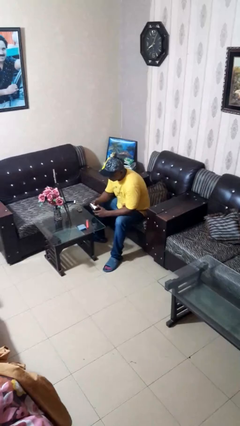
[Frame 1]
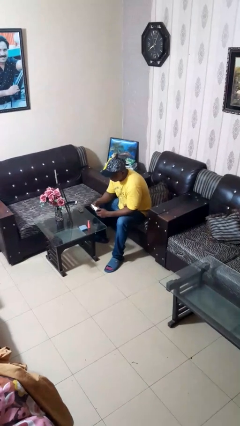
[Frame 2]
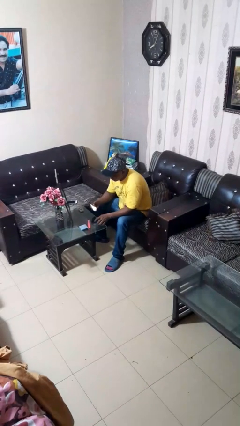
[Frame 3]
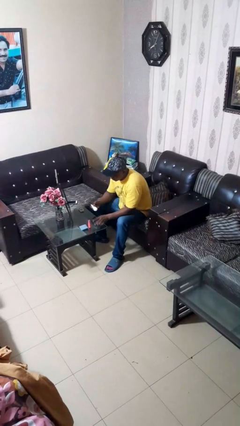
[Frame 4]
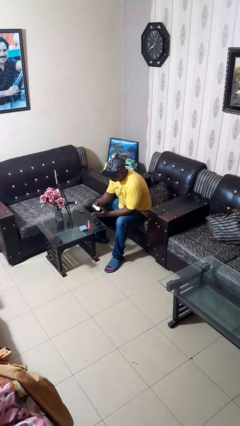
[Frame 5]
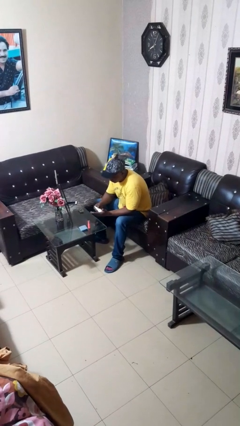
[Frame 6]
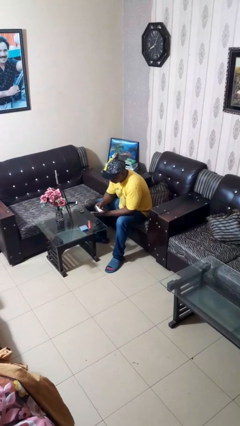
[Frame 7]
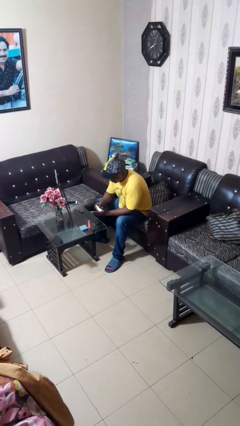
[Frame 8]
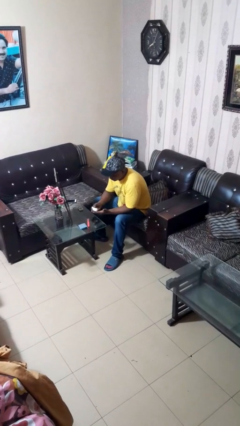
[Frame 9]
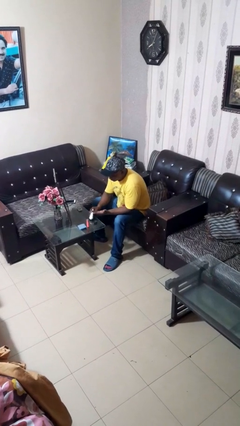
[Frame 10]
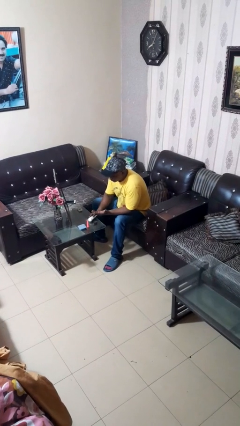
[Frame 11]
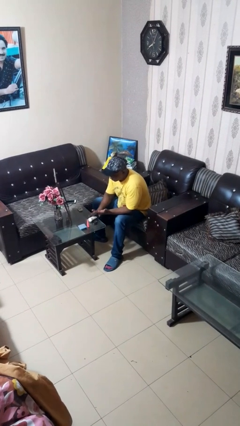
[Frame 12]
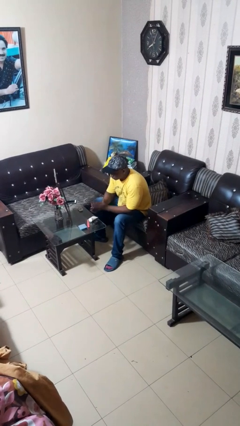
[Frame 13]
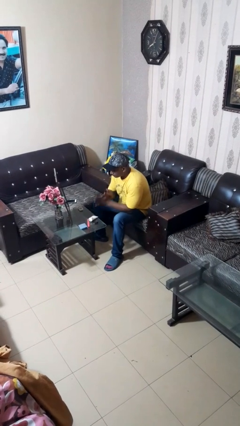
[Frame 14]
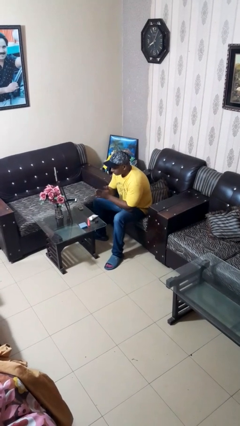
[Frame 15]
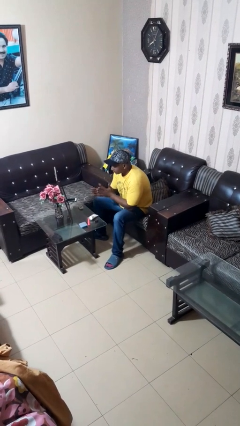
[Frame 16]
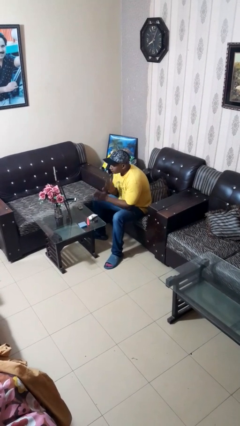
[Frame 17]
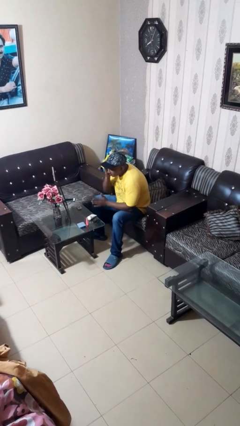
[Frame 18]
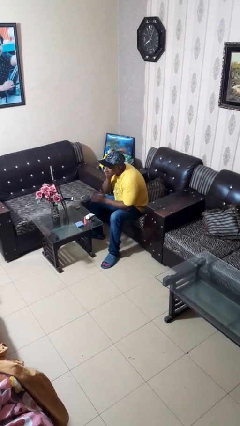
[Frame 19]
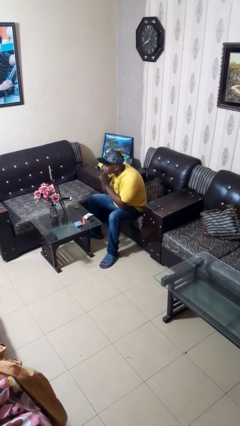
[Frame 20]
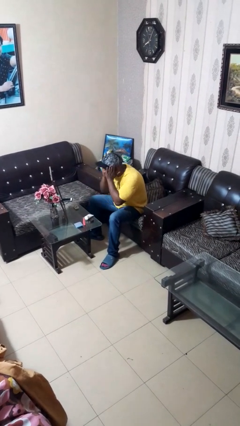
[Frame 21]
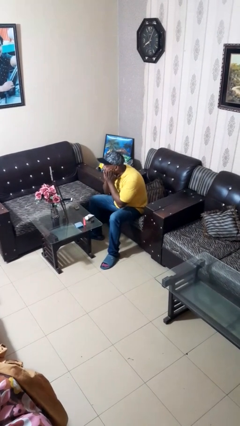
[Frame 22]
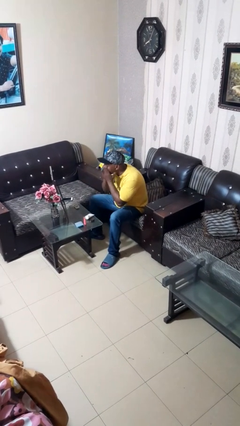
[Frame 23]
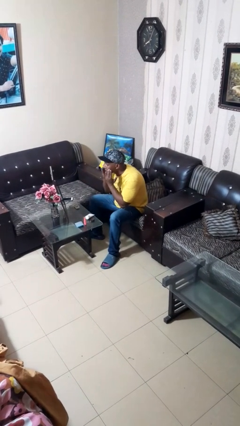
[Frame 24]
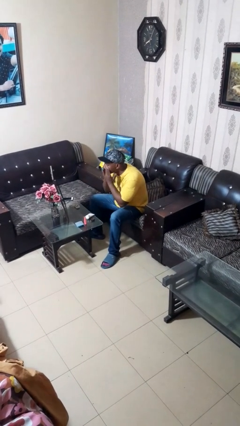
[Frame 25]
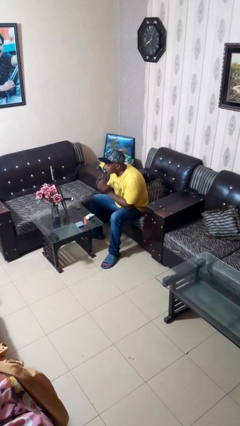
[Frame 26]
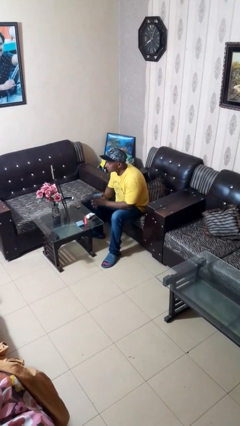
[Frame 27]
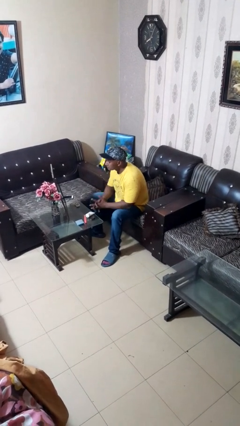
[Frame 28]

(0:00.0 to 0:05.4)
person applies foundation makeup

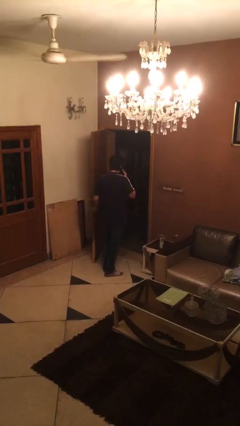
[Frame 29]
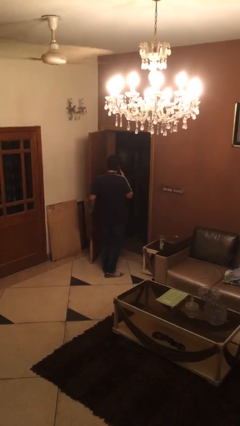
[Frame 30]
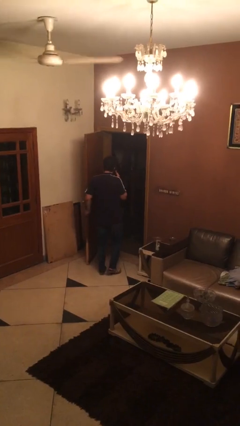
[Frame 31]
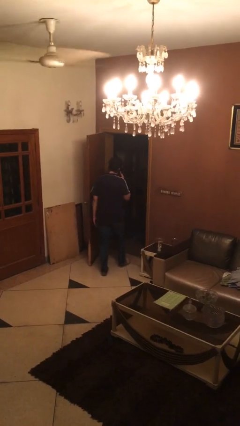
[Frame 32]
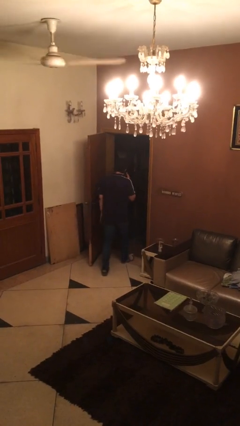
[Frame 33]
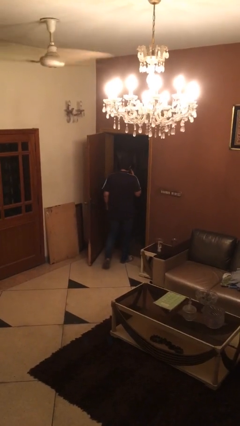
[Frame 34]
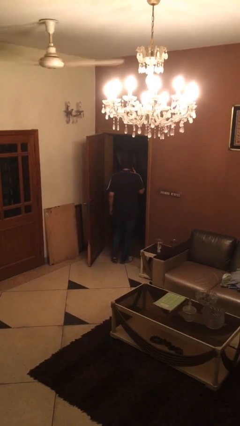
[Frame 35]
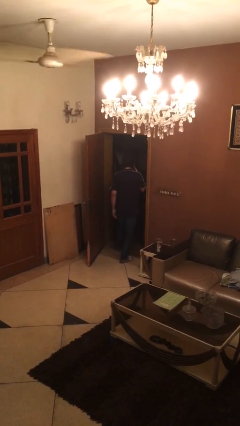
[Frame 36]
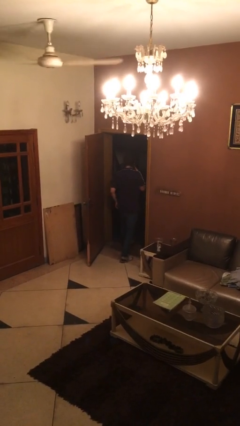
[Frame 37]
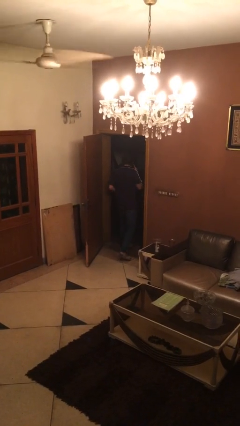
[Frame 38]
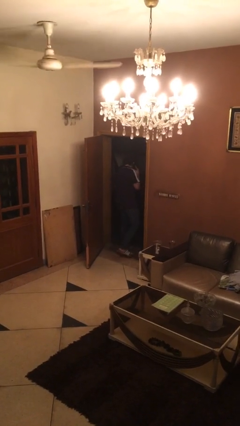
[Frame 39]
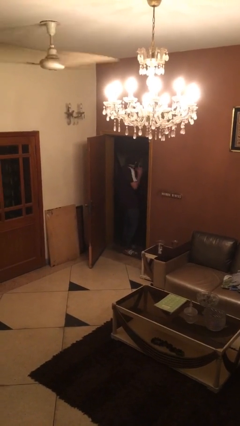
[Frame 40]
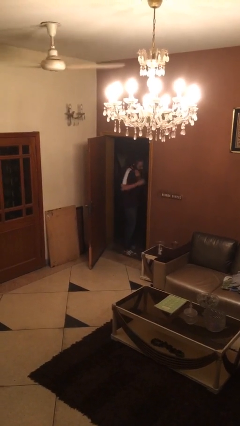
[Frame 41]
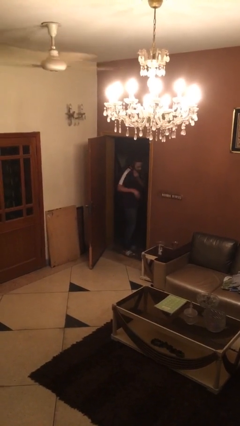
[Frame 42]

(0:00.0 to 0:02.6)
person exits scene through structure

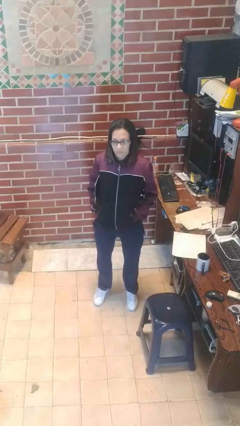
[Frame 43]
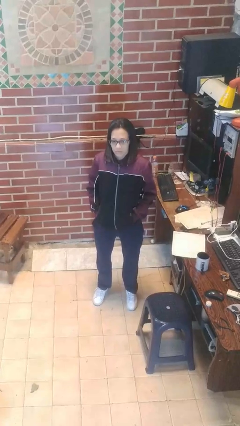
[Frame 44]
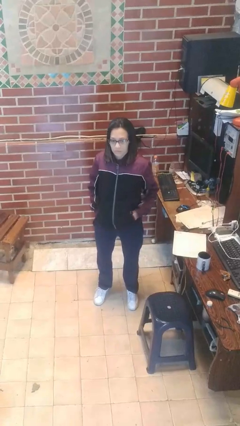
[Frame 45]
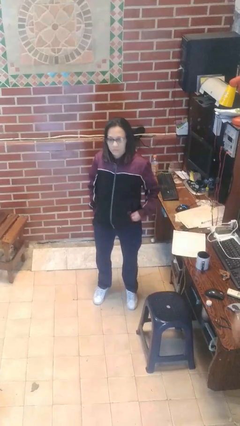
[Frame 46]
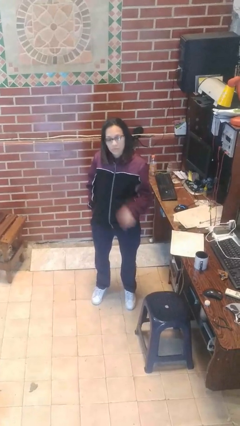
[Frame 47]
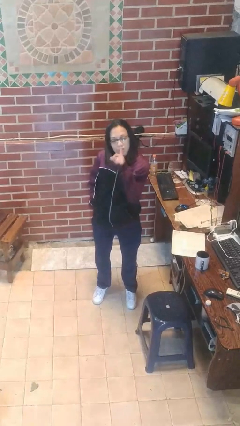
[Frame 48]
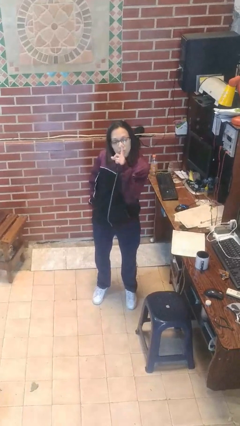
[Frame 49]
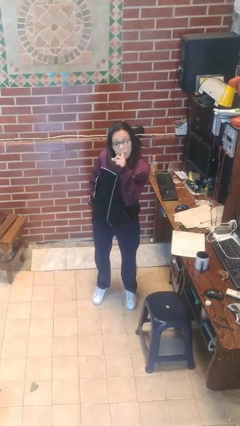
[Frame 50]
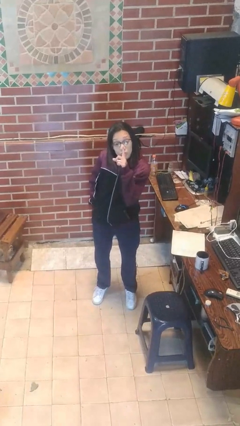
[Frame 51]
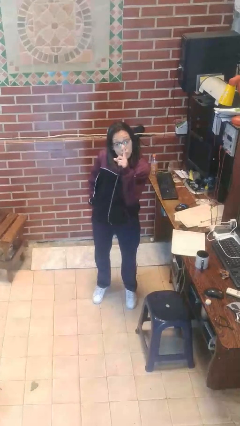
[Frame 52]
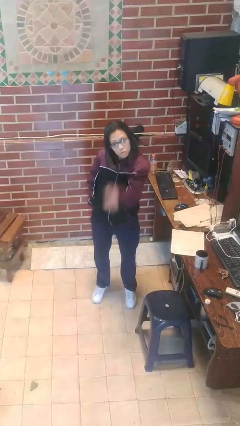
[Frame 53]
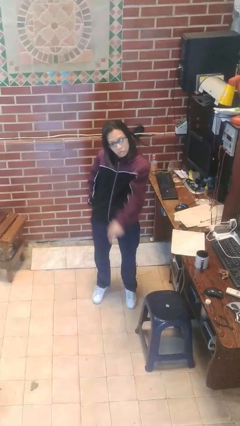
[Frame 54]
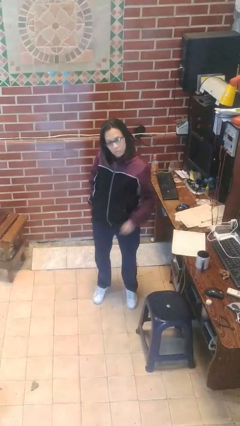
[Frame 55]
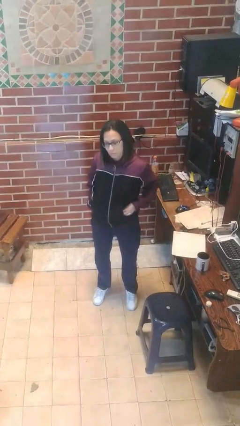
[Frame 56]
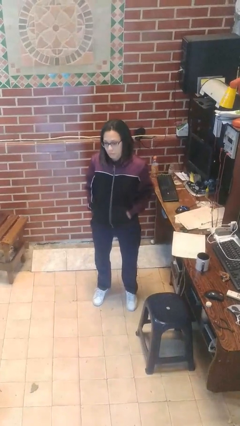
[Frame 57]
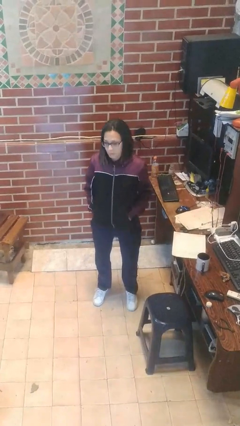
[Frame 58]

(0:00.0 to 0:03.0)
person gestures be quiet

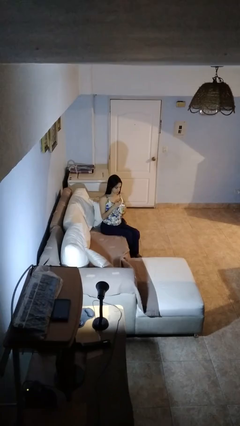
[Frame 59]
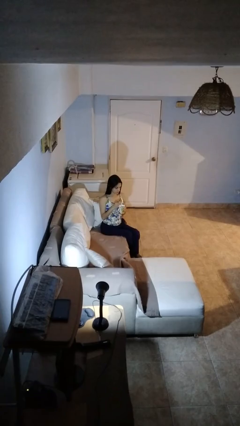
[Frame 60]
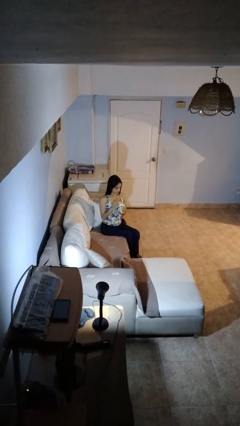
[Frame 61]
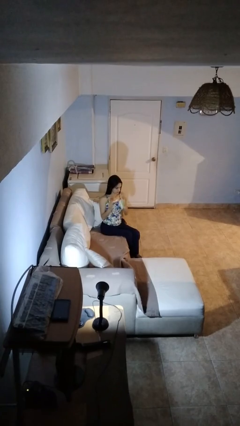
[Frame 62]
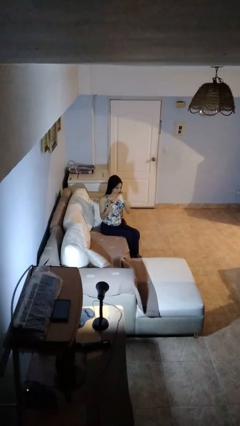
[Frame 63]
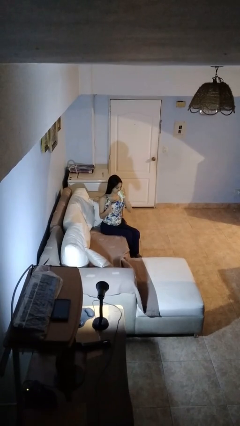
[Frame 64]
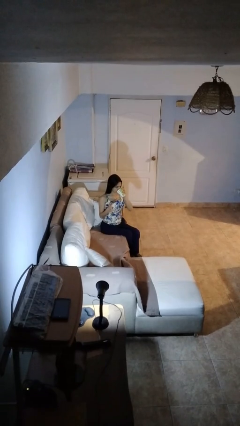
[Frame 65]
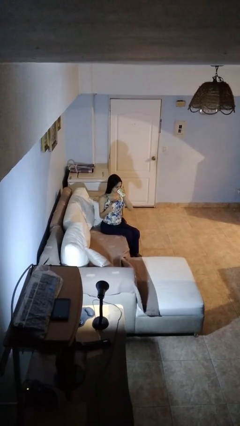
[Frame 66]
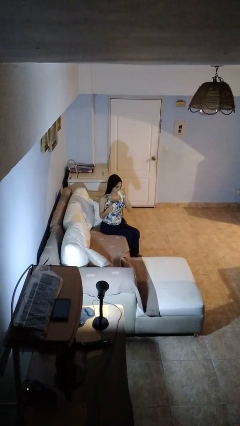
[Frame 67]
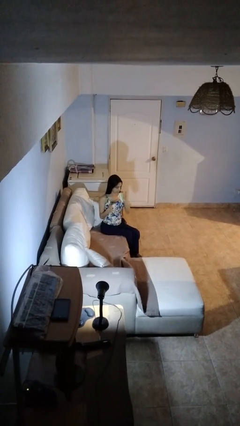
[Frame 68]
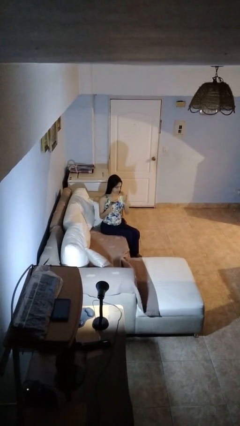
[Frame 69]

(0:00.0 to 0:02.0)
person drinks from mug

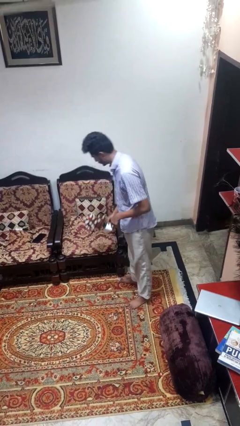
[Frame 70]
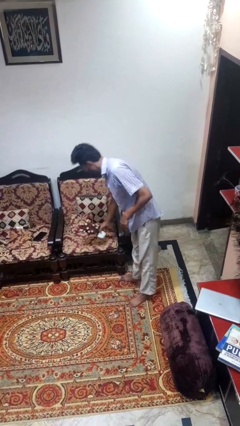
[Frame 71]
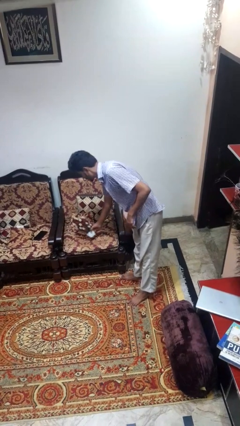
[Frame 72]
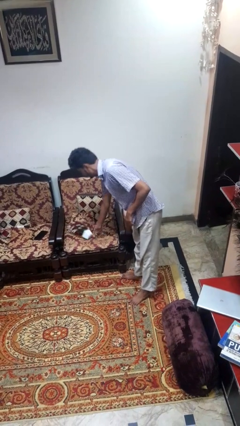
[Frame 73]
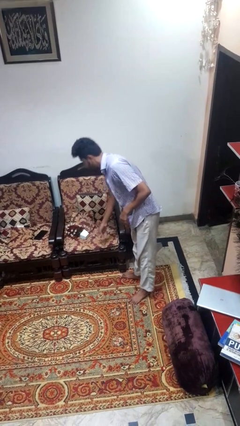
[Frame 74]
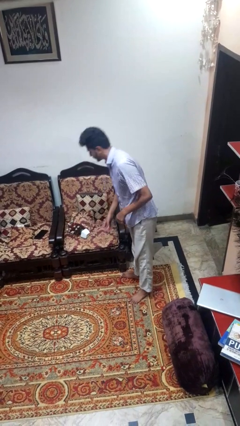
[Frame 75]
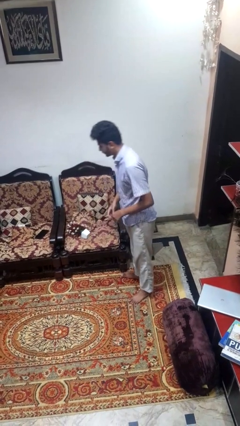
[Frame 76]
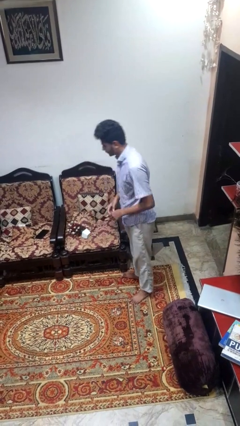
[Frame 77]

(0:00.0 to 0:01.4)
person puts down object on couch

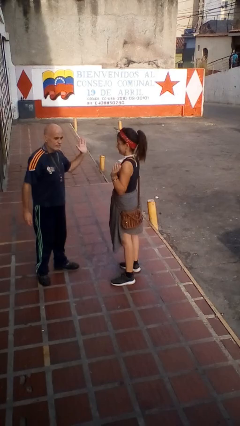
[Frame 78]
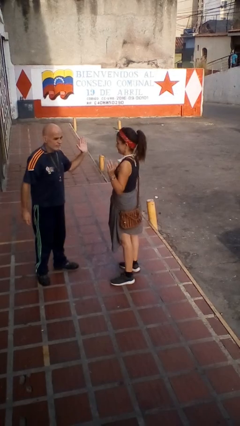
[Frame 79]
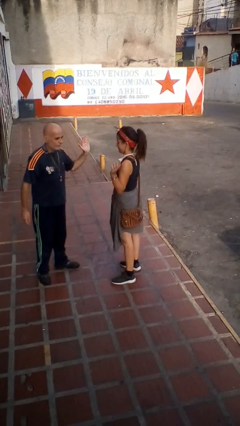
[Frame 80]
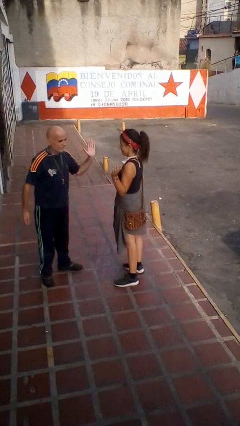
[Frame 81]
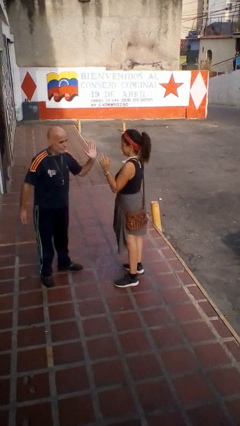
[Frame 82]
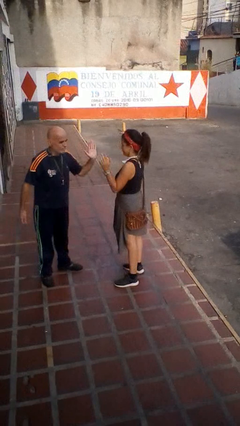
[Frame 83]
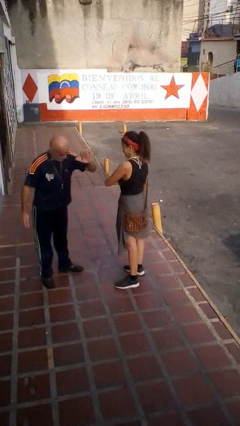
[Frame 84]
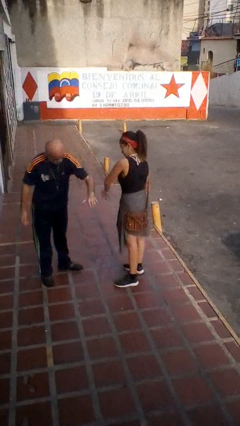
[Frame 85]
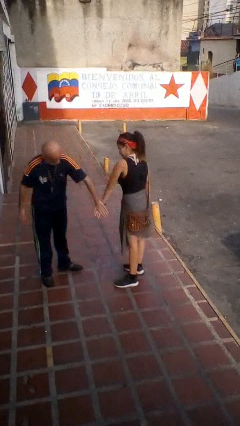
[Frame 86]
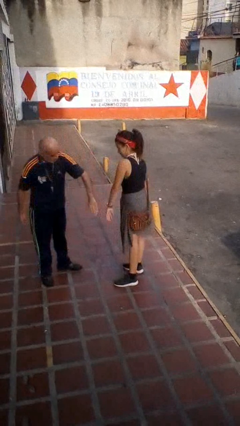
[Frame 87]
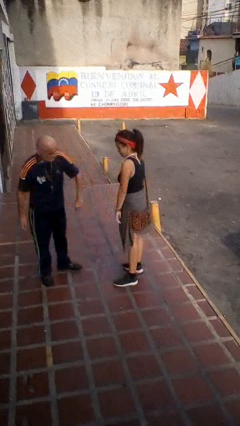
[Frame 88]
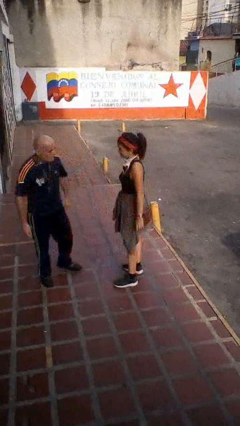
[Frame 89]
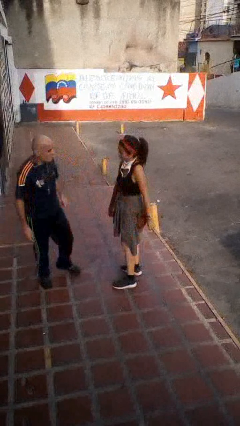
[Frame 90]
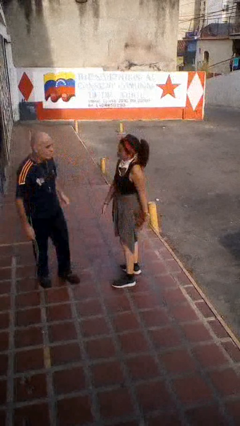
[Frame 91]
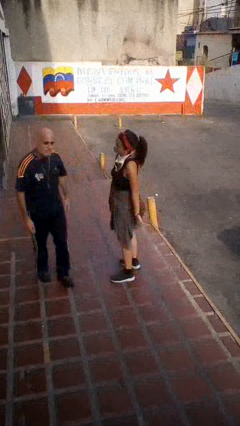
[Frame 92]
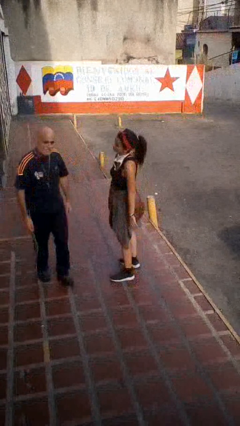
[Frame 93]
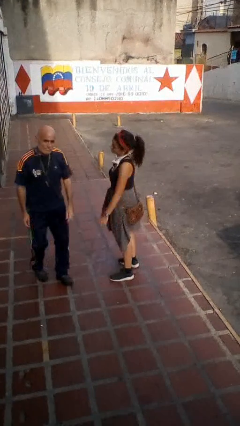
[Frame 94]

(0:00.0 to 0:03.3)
person highfives hand
